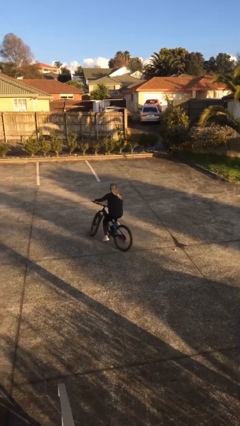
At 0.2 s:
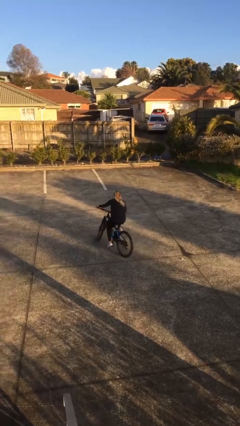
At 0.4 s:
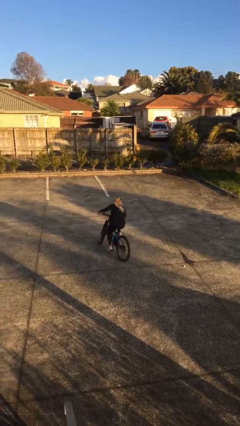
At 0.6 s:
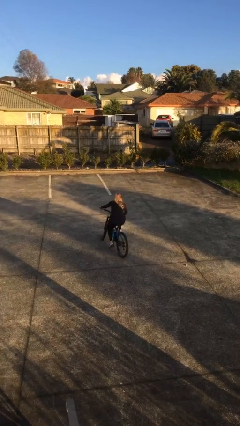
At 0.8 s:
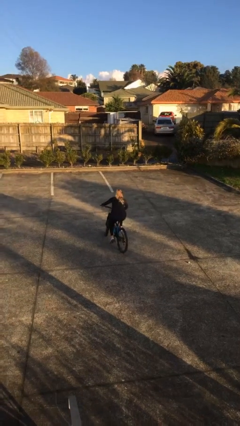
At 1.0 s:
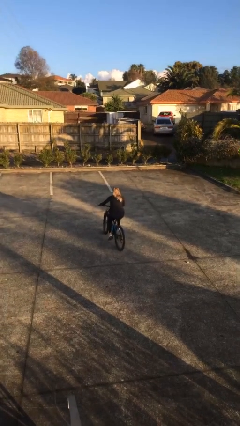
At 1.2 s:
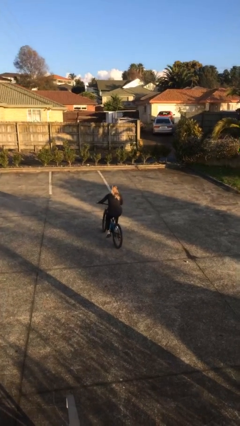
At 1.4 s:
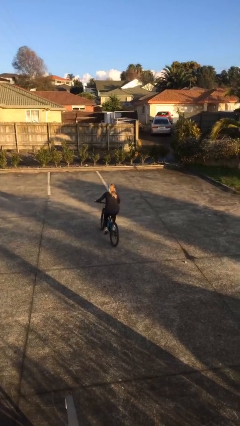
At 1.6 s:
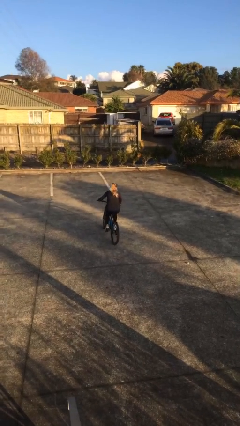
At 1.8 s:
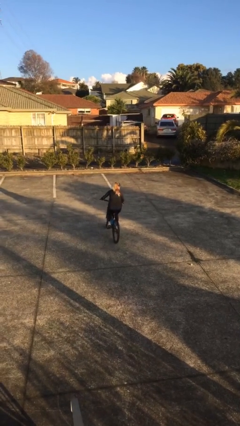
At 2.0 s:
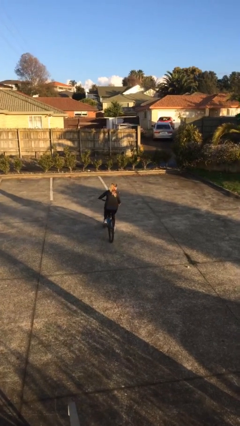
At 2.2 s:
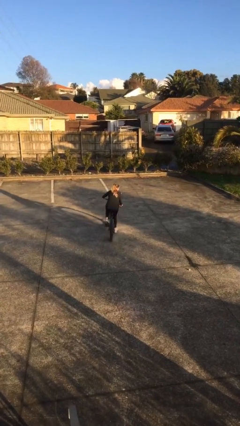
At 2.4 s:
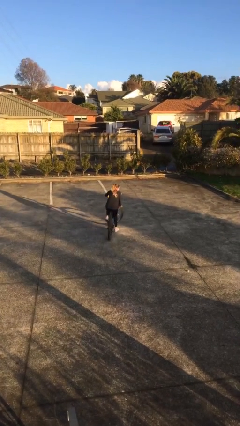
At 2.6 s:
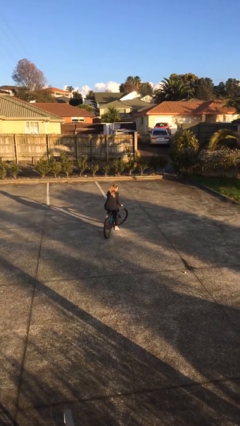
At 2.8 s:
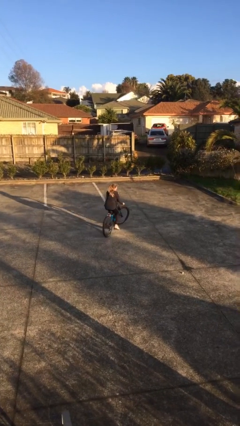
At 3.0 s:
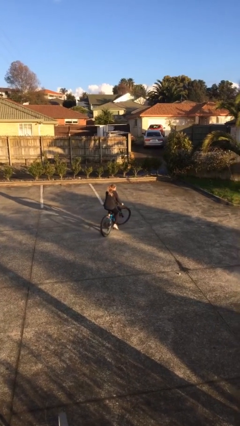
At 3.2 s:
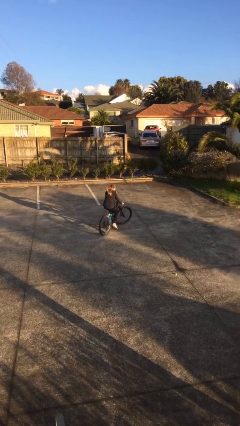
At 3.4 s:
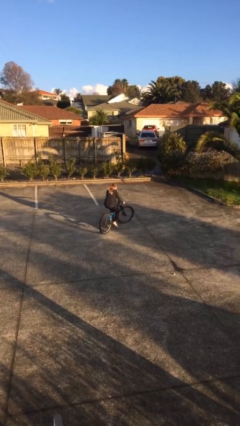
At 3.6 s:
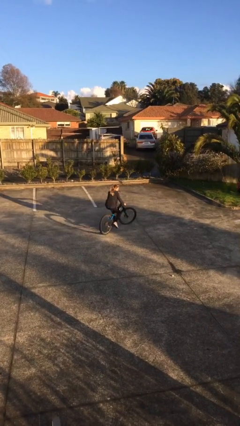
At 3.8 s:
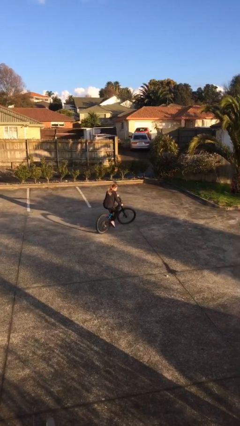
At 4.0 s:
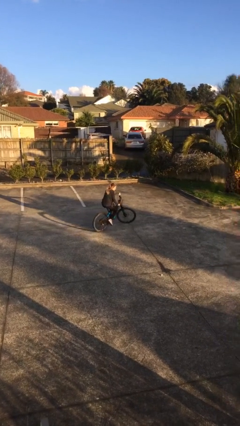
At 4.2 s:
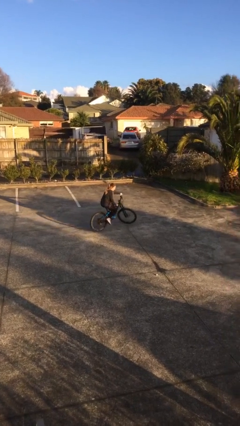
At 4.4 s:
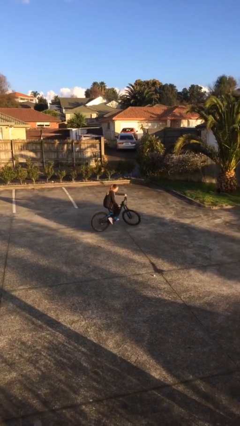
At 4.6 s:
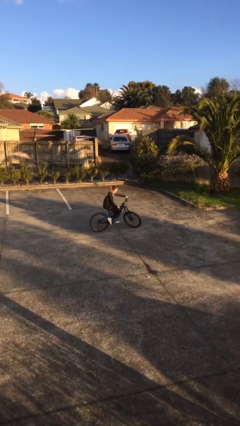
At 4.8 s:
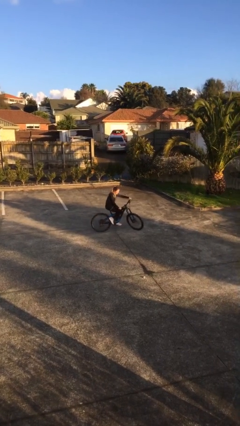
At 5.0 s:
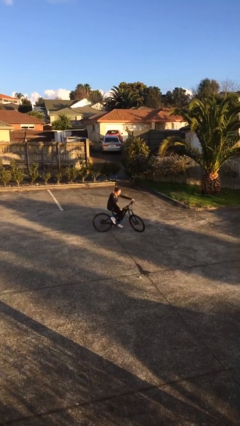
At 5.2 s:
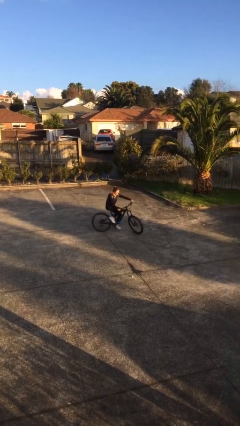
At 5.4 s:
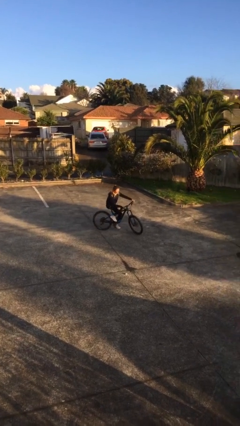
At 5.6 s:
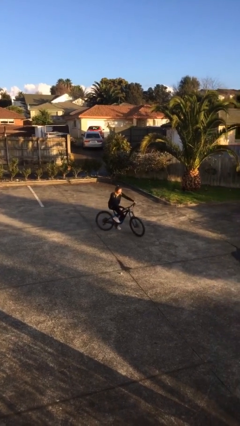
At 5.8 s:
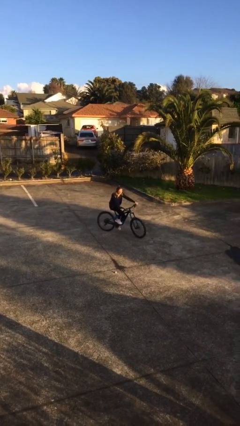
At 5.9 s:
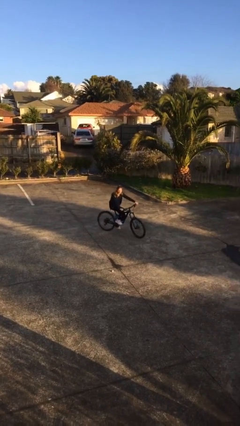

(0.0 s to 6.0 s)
person rides bicycle

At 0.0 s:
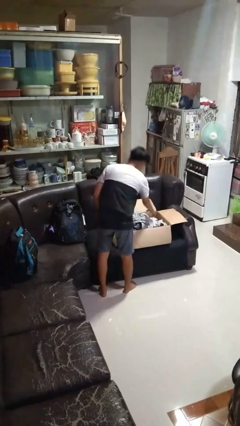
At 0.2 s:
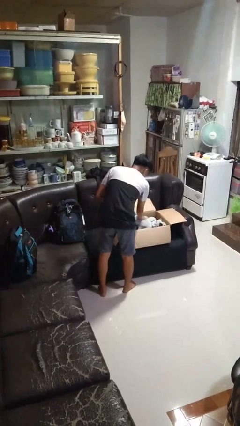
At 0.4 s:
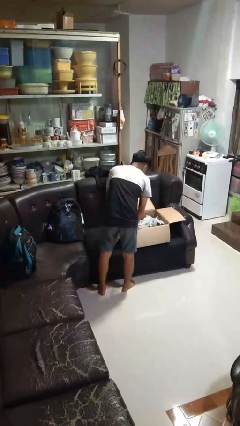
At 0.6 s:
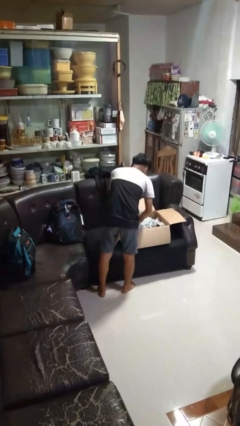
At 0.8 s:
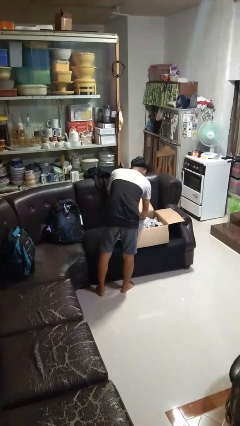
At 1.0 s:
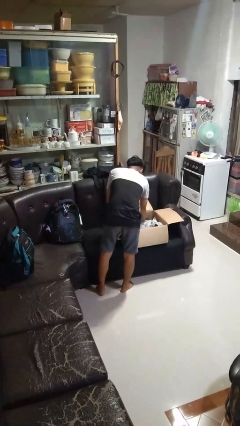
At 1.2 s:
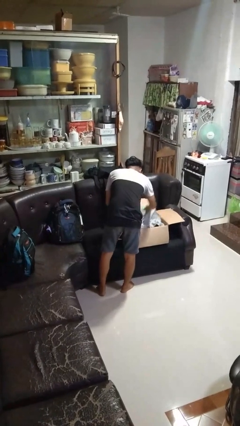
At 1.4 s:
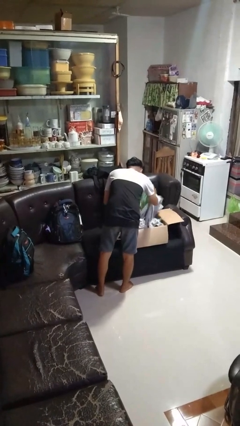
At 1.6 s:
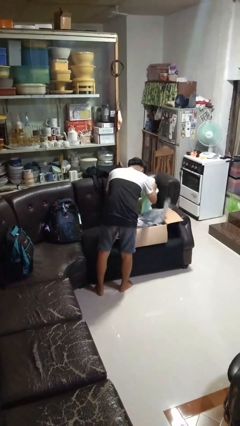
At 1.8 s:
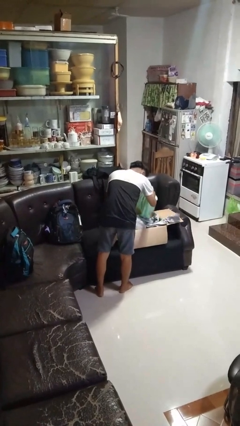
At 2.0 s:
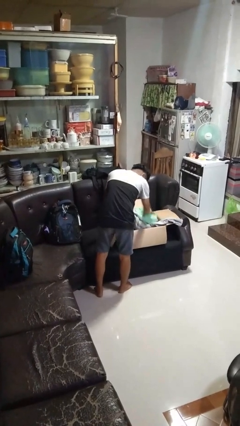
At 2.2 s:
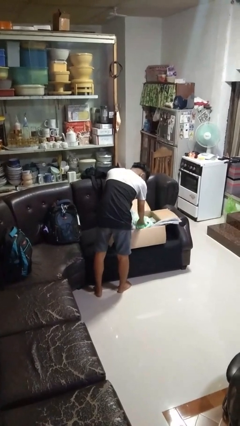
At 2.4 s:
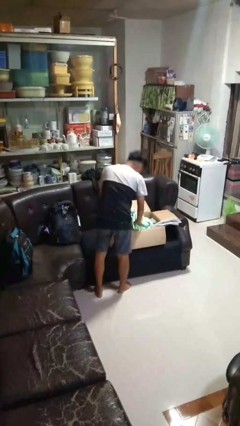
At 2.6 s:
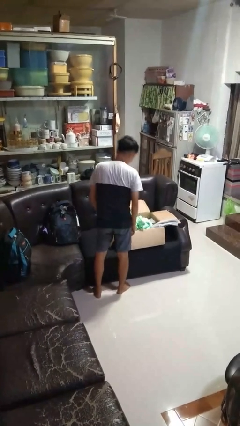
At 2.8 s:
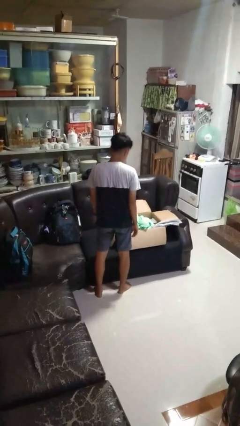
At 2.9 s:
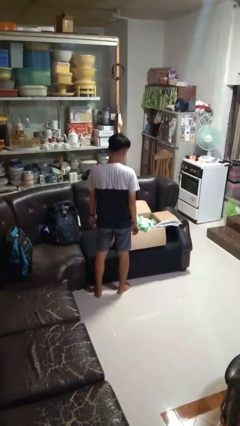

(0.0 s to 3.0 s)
person searches in box

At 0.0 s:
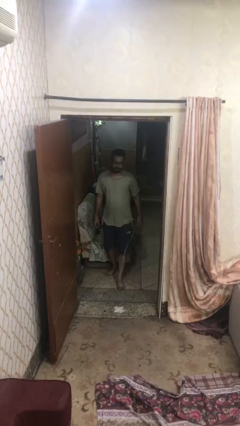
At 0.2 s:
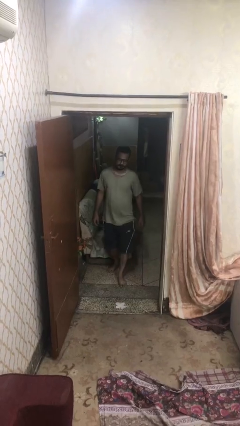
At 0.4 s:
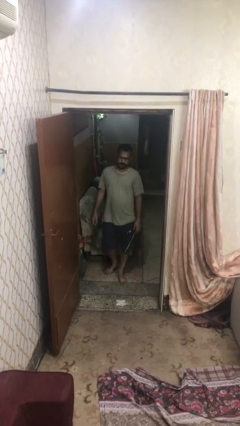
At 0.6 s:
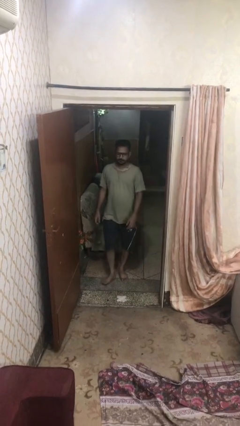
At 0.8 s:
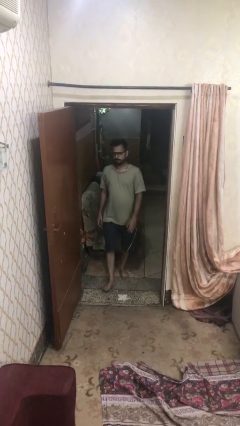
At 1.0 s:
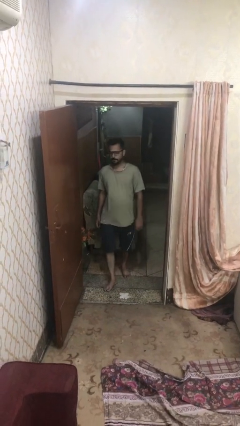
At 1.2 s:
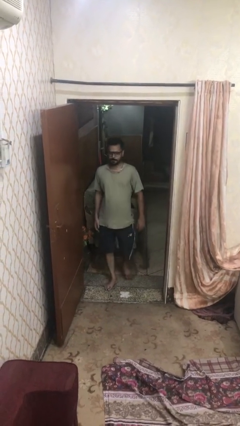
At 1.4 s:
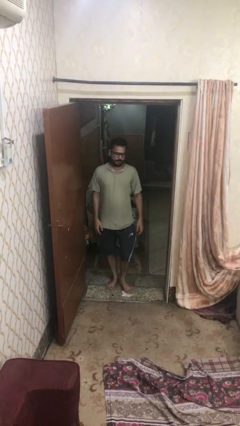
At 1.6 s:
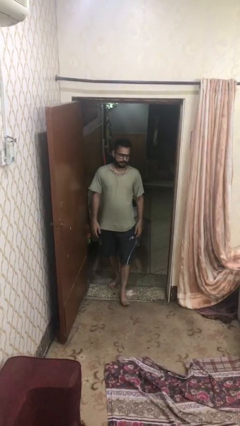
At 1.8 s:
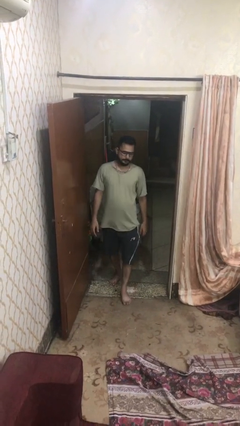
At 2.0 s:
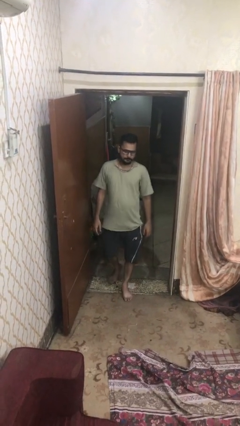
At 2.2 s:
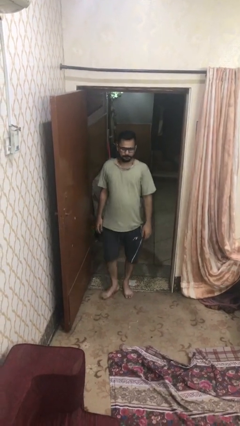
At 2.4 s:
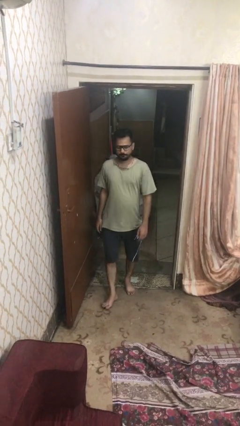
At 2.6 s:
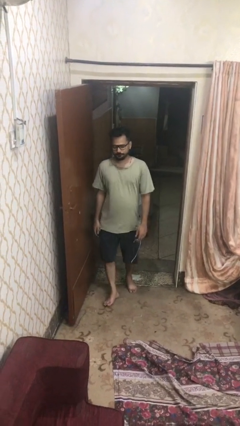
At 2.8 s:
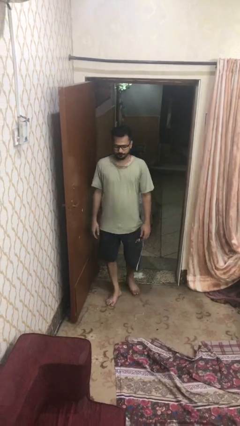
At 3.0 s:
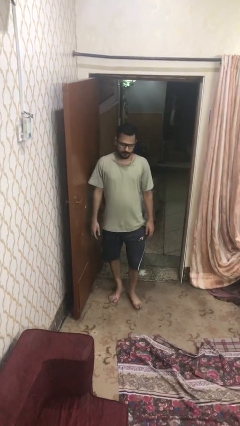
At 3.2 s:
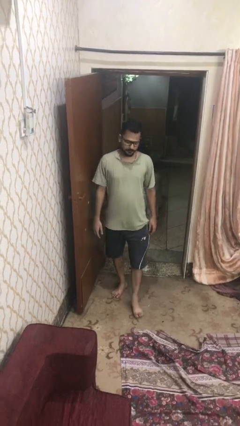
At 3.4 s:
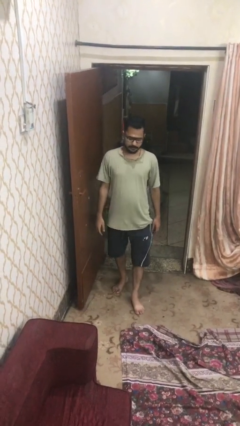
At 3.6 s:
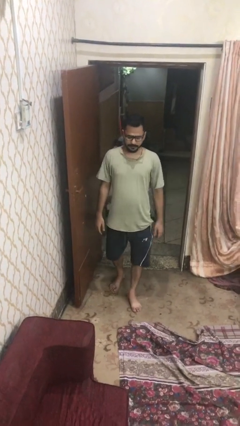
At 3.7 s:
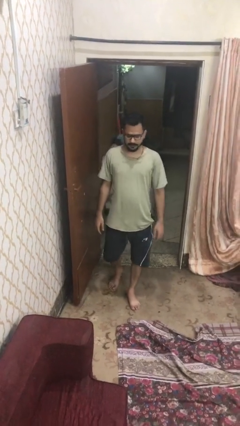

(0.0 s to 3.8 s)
person enters scene through structure

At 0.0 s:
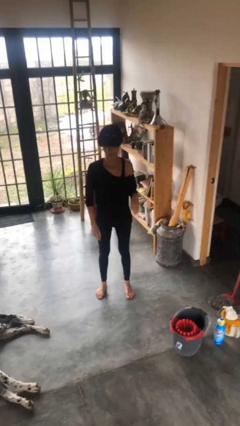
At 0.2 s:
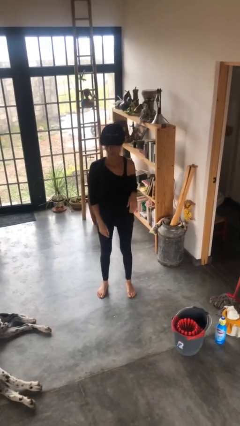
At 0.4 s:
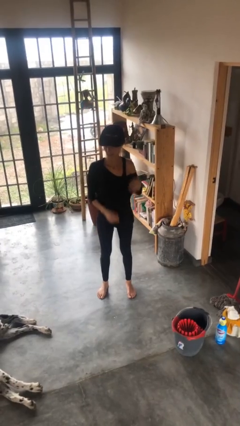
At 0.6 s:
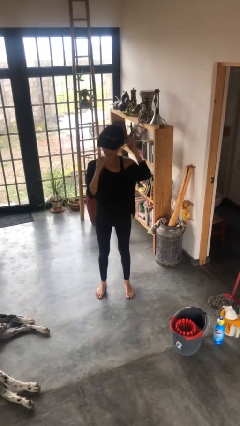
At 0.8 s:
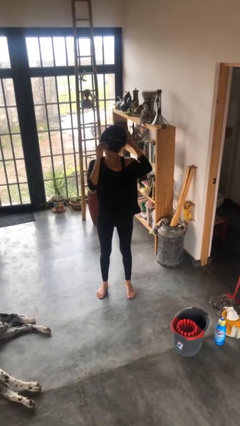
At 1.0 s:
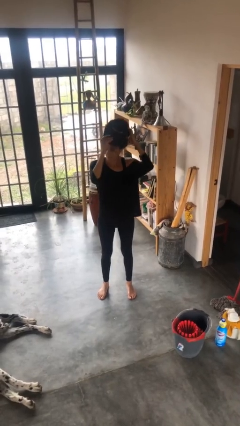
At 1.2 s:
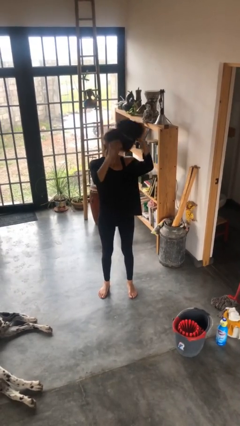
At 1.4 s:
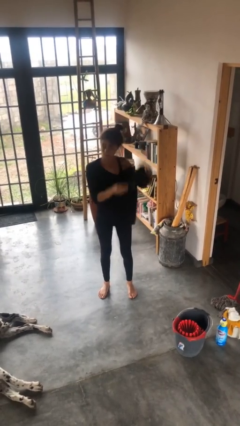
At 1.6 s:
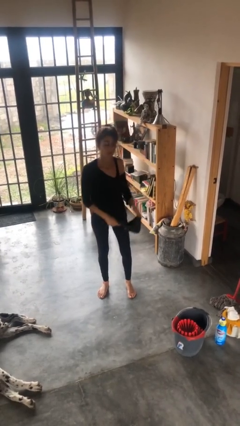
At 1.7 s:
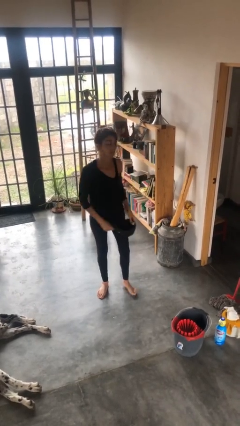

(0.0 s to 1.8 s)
person takes off hat

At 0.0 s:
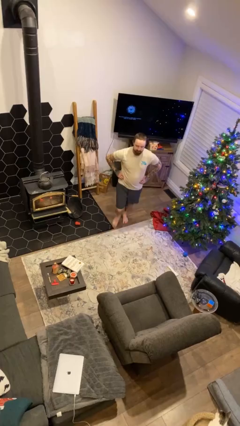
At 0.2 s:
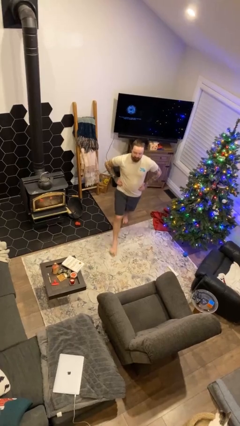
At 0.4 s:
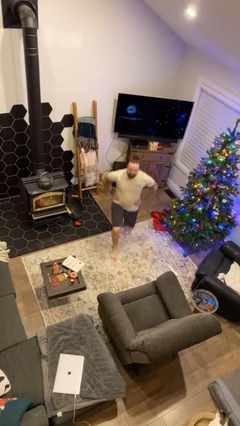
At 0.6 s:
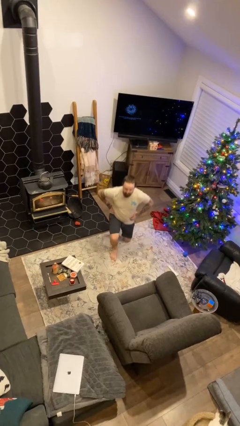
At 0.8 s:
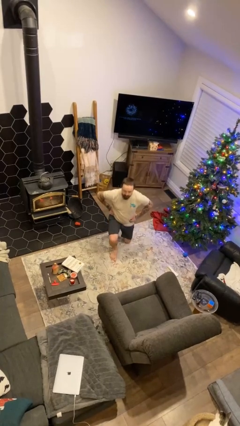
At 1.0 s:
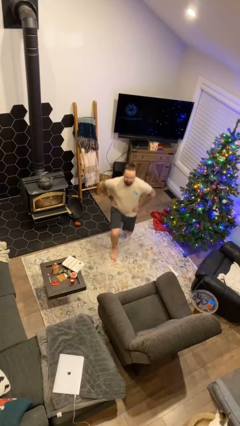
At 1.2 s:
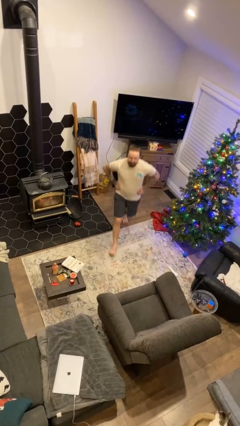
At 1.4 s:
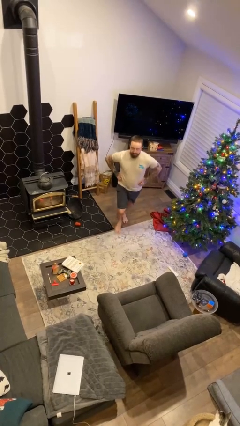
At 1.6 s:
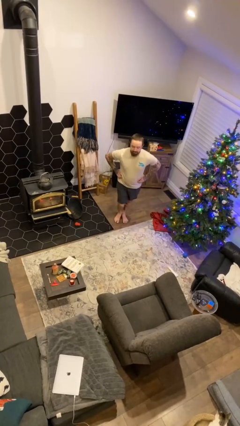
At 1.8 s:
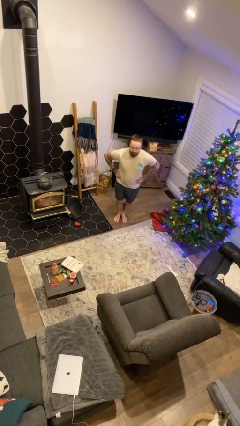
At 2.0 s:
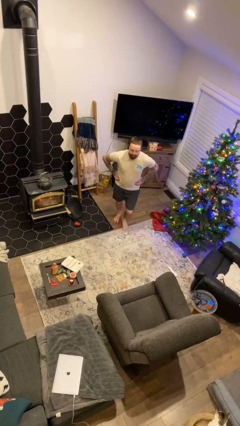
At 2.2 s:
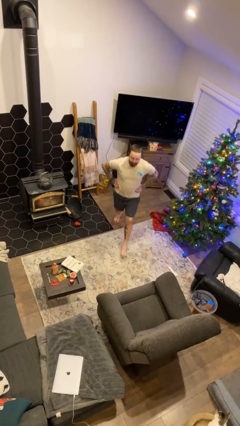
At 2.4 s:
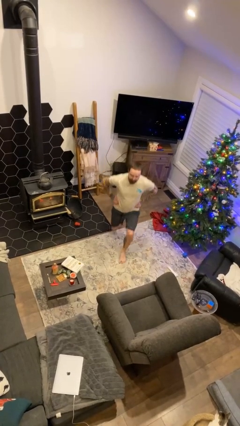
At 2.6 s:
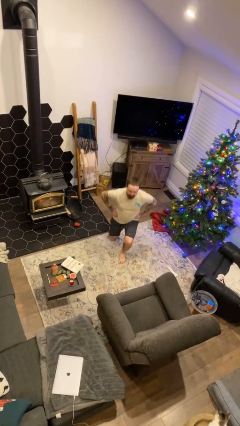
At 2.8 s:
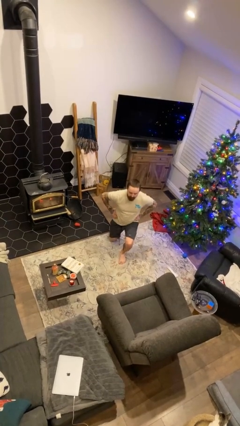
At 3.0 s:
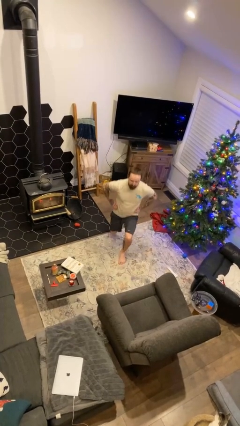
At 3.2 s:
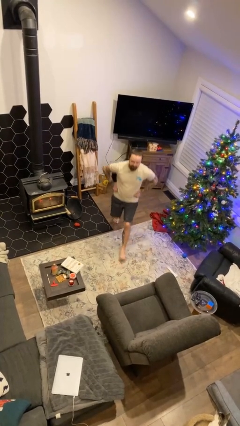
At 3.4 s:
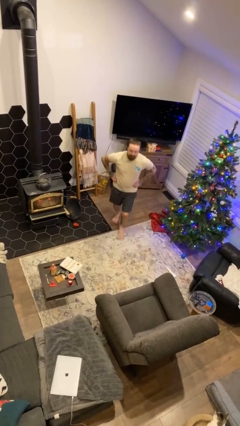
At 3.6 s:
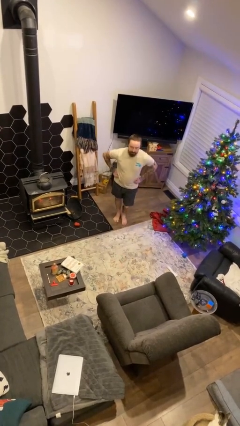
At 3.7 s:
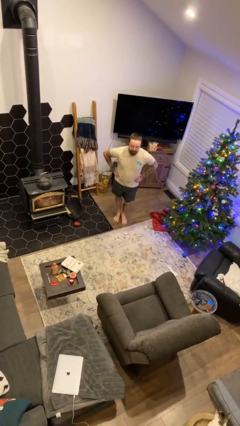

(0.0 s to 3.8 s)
person exercises with lunges
